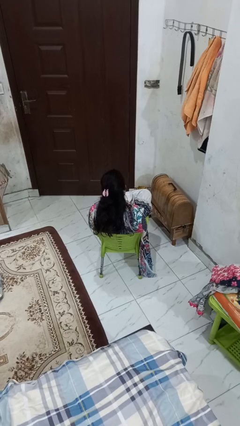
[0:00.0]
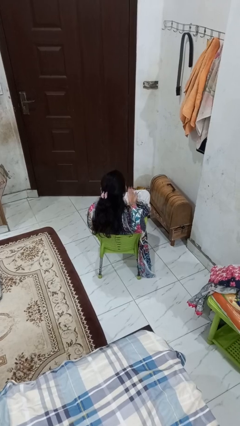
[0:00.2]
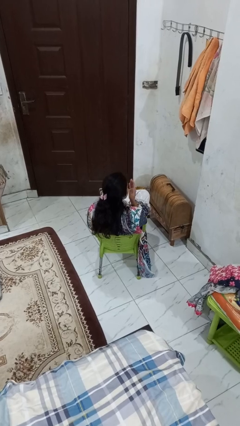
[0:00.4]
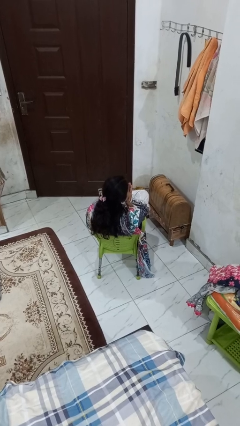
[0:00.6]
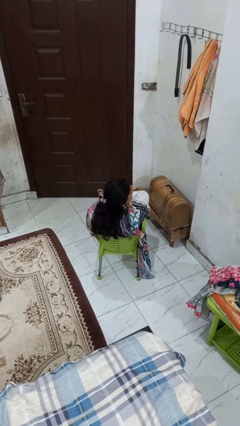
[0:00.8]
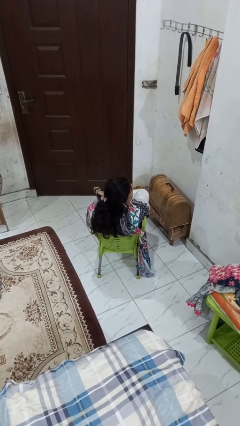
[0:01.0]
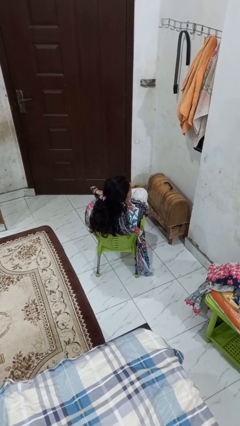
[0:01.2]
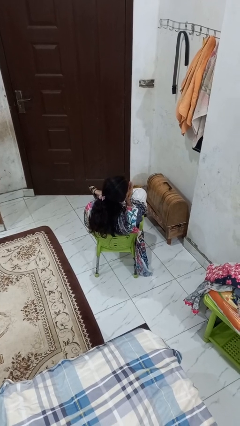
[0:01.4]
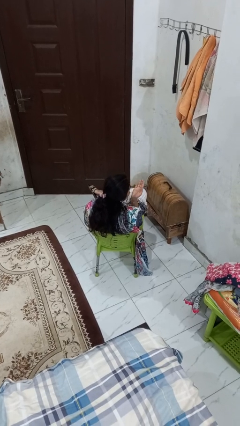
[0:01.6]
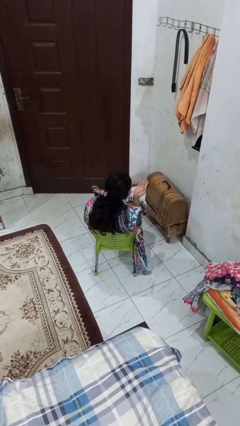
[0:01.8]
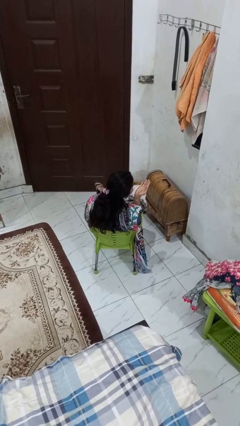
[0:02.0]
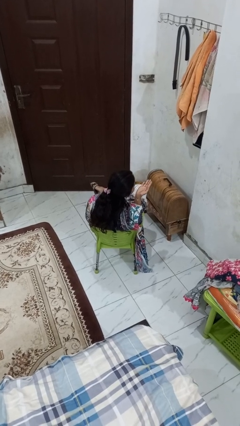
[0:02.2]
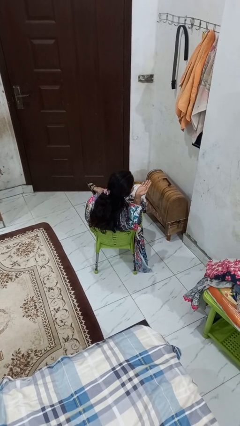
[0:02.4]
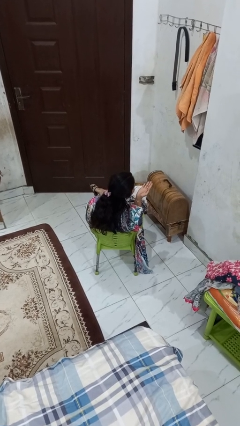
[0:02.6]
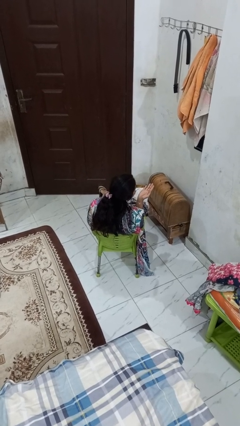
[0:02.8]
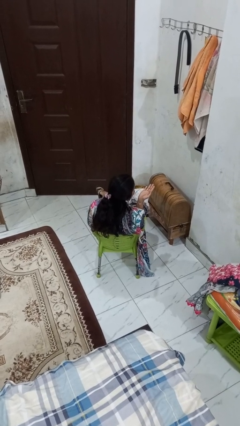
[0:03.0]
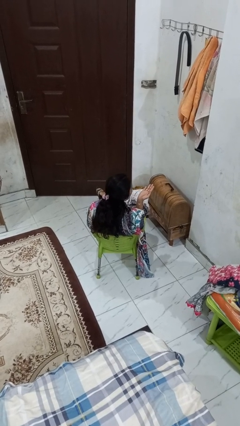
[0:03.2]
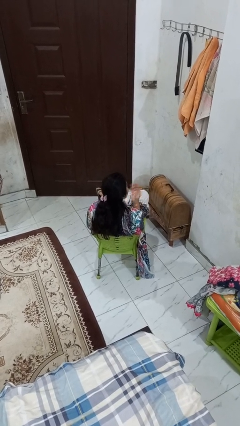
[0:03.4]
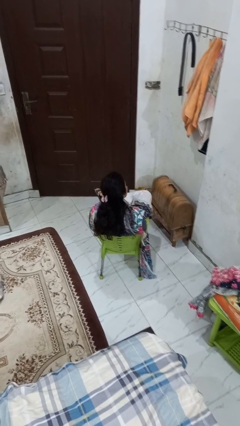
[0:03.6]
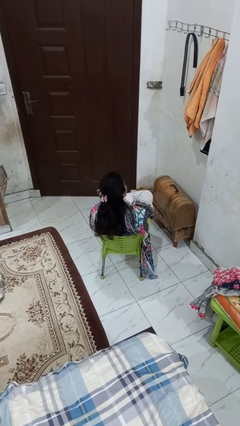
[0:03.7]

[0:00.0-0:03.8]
person gestures blow kiss

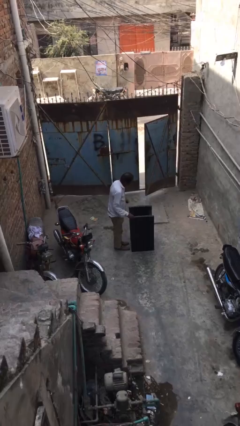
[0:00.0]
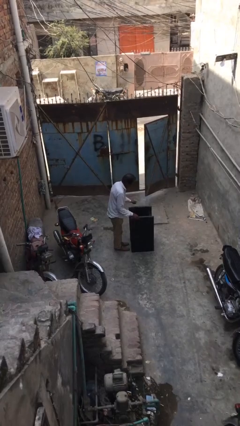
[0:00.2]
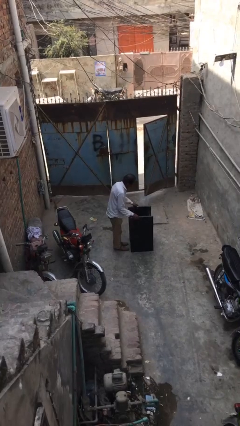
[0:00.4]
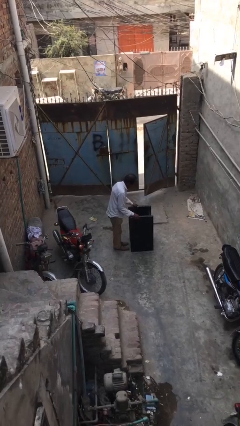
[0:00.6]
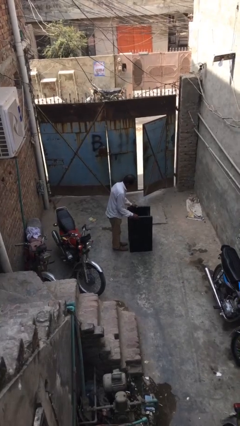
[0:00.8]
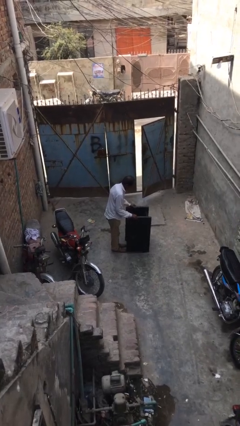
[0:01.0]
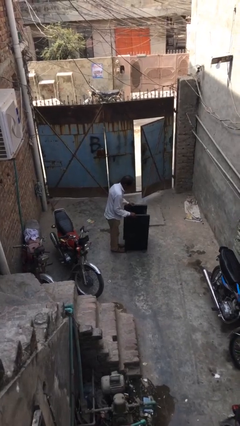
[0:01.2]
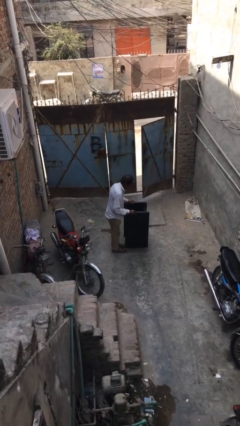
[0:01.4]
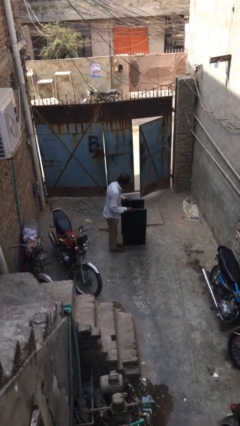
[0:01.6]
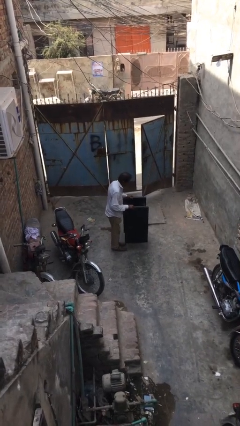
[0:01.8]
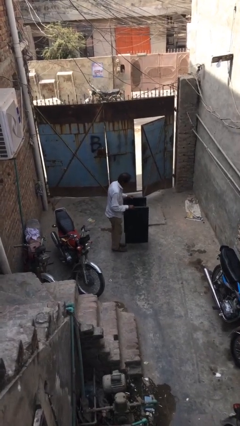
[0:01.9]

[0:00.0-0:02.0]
person picks up object from floor

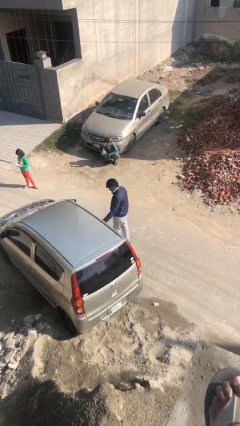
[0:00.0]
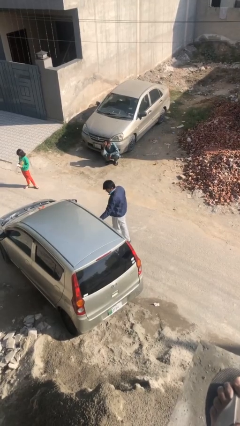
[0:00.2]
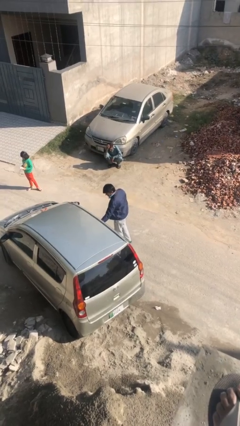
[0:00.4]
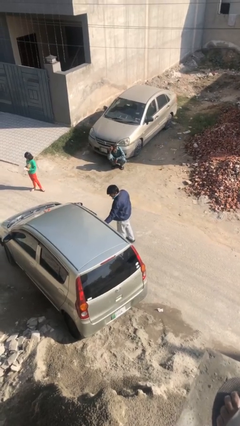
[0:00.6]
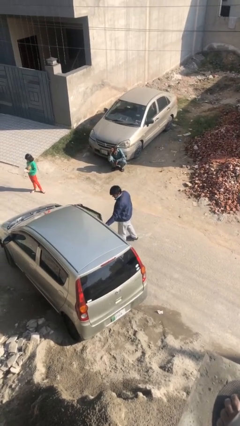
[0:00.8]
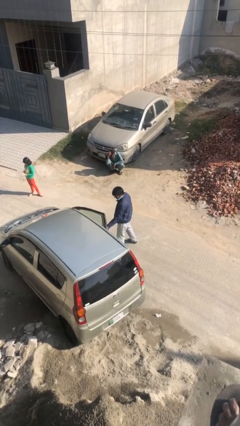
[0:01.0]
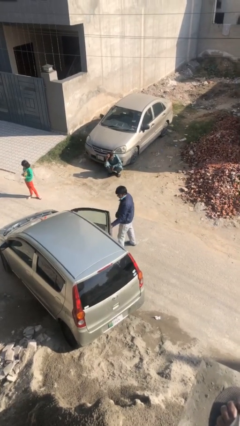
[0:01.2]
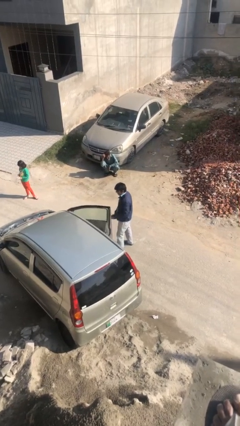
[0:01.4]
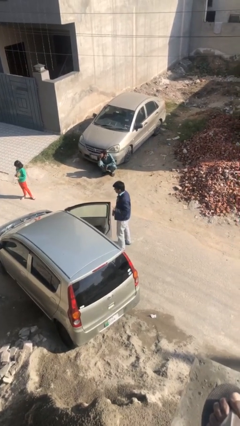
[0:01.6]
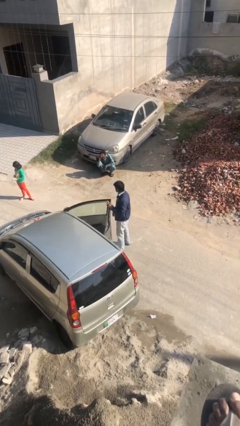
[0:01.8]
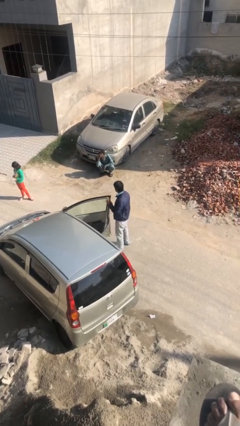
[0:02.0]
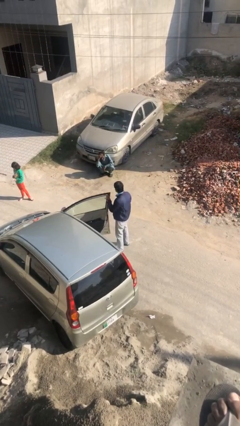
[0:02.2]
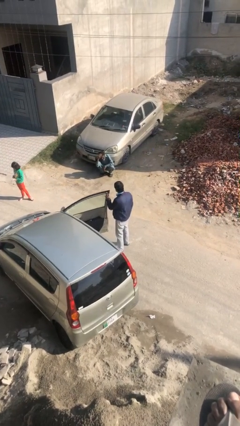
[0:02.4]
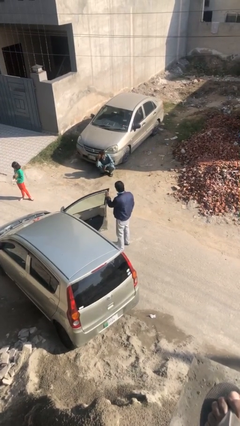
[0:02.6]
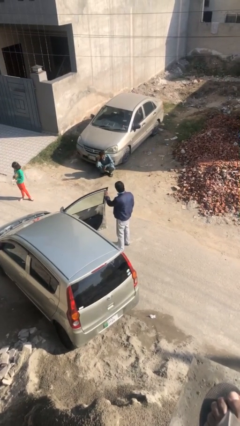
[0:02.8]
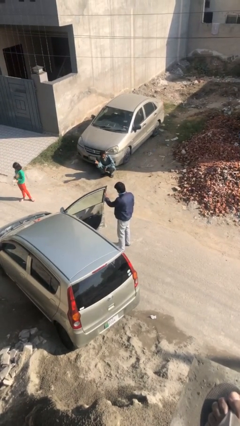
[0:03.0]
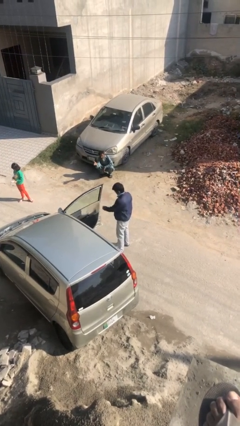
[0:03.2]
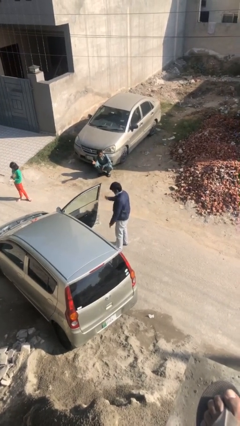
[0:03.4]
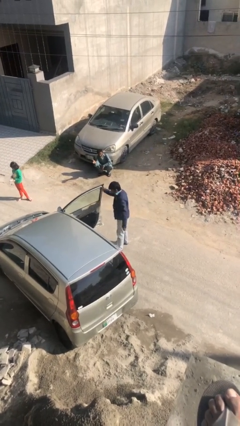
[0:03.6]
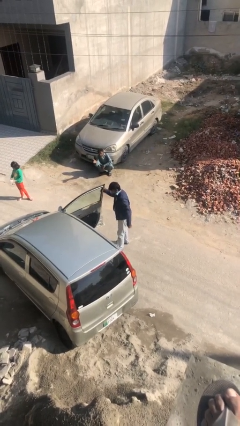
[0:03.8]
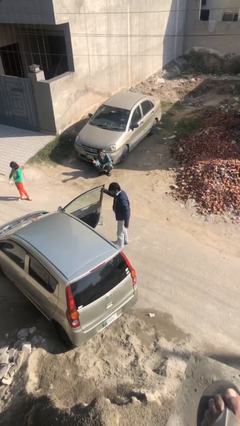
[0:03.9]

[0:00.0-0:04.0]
person opens car door

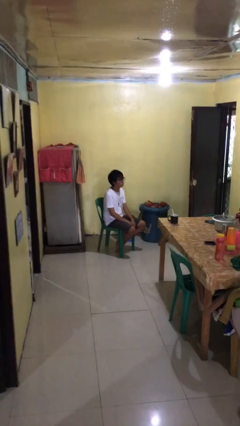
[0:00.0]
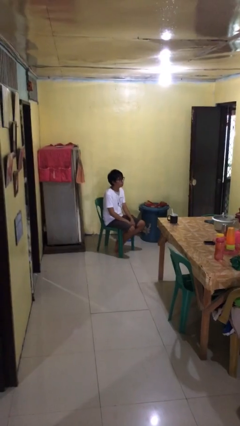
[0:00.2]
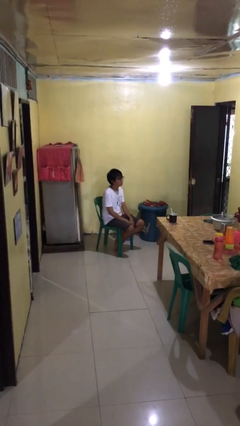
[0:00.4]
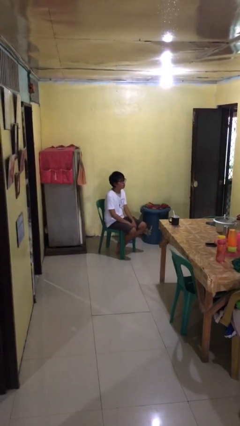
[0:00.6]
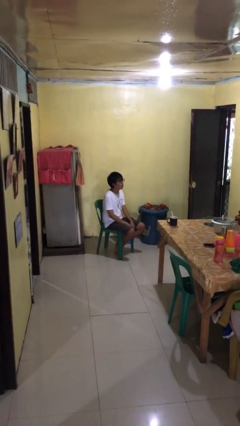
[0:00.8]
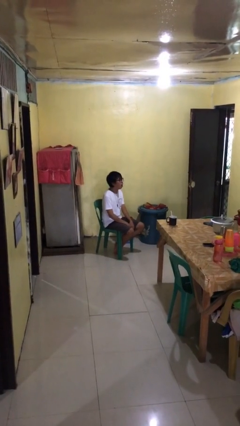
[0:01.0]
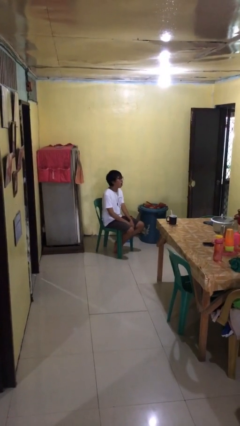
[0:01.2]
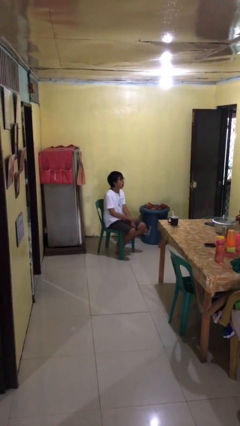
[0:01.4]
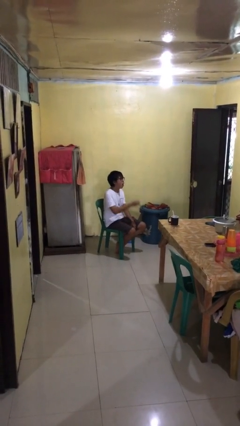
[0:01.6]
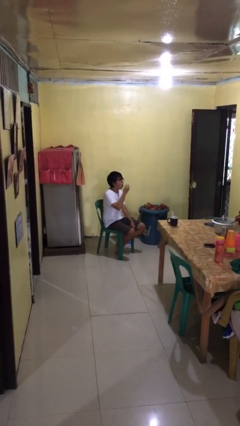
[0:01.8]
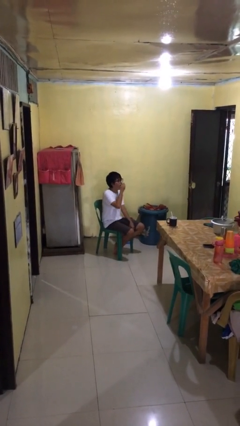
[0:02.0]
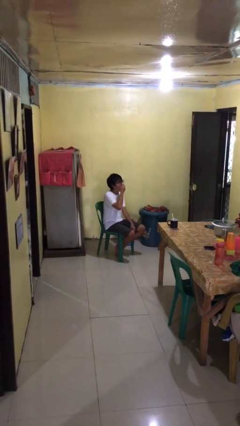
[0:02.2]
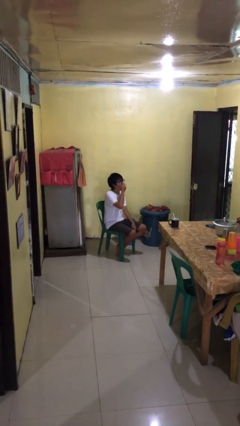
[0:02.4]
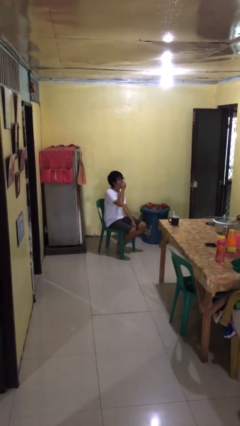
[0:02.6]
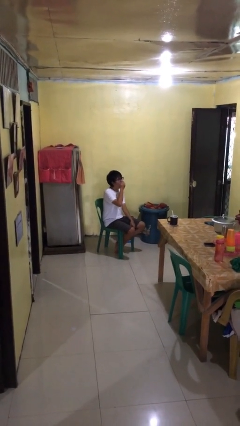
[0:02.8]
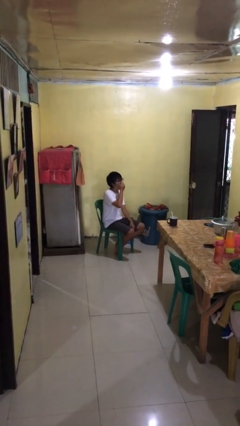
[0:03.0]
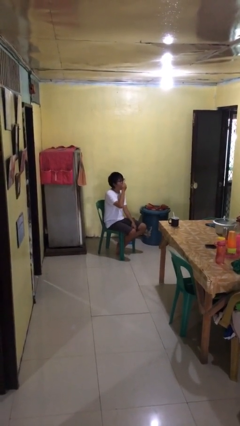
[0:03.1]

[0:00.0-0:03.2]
person yawns

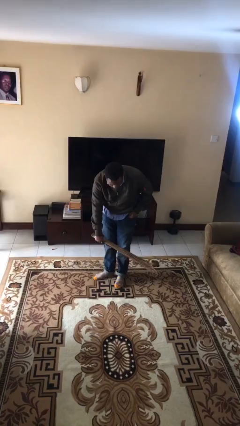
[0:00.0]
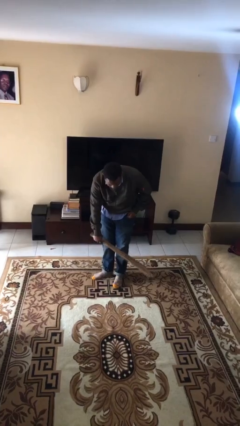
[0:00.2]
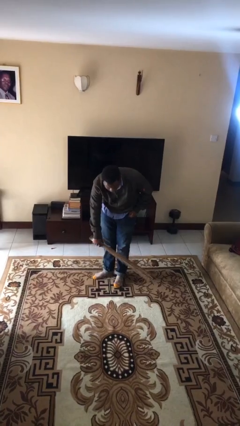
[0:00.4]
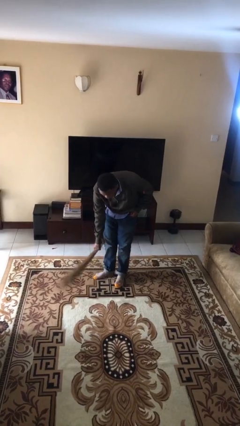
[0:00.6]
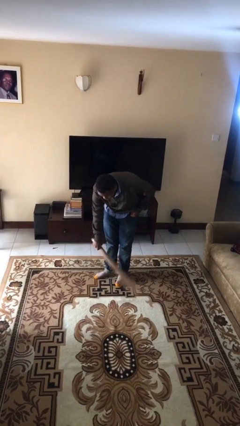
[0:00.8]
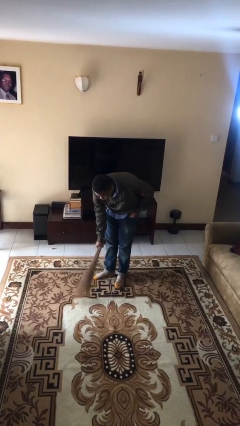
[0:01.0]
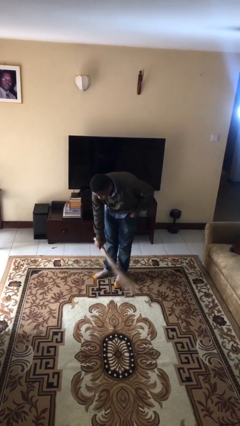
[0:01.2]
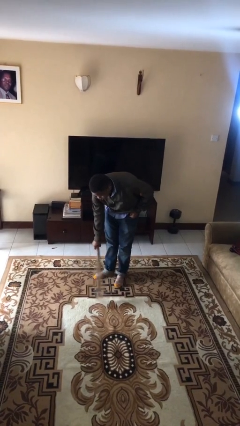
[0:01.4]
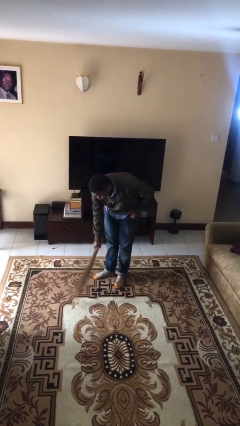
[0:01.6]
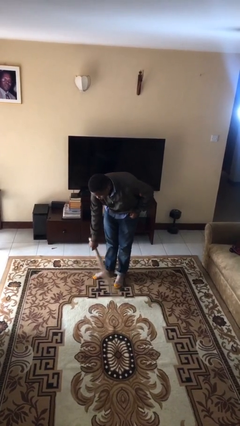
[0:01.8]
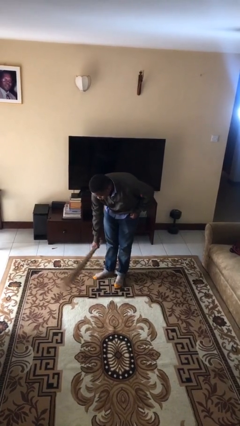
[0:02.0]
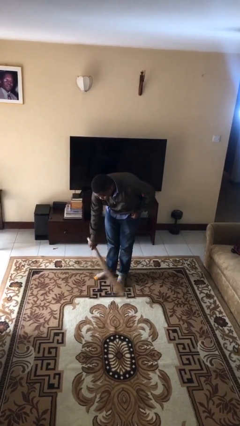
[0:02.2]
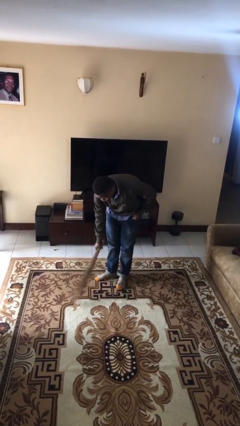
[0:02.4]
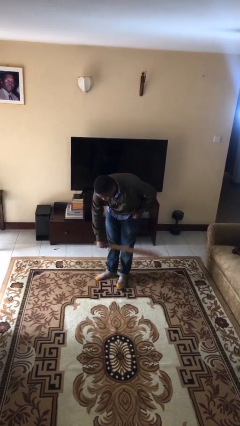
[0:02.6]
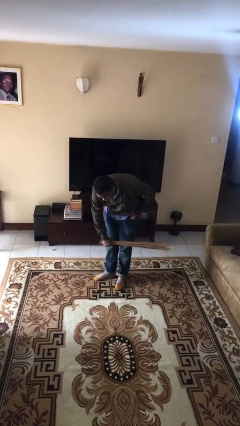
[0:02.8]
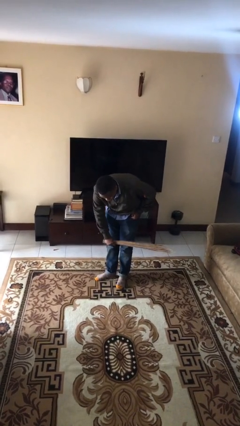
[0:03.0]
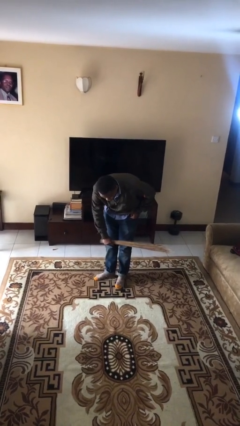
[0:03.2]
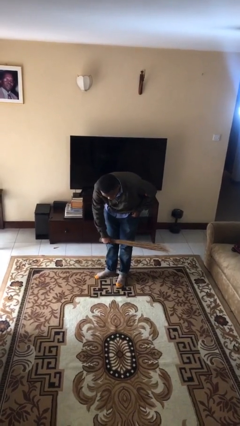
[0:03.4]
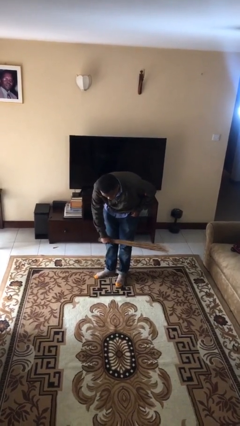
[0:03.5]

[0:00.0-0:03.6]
person sweeps floor

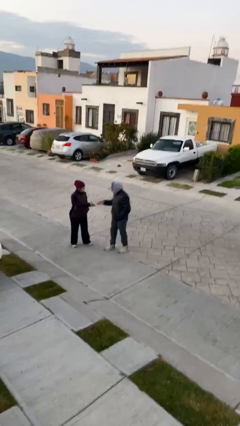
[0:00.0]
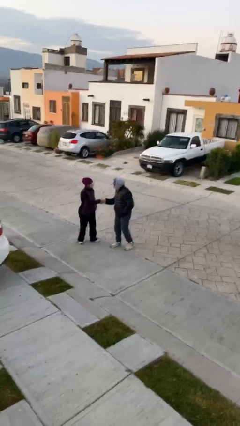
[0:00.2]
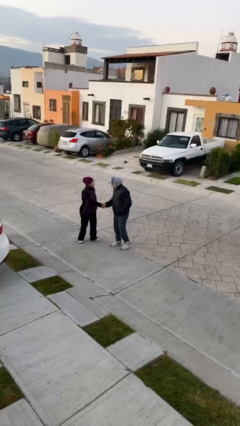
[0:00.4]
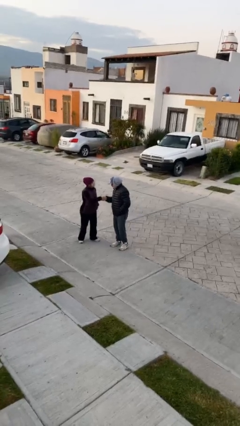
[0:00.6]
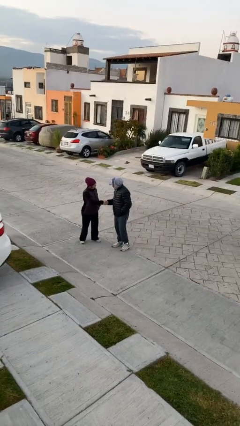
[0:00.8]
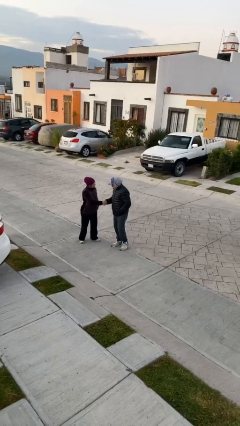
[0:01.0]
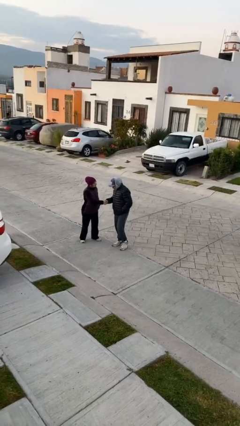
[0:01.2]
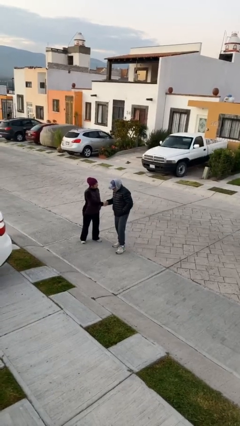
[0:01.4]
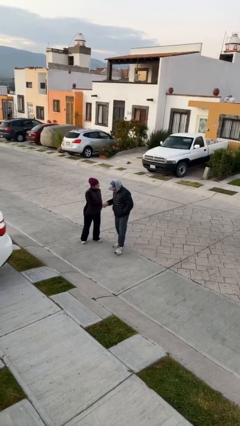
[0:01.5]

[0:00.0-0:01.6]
person shakes hand
